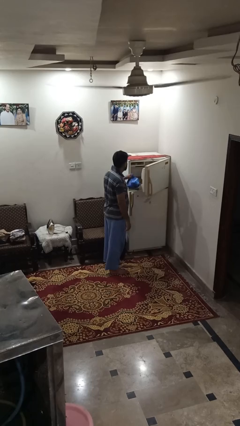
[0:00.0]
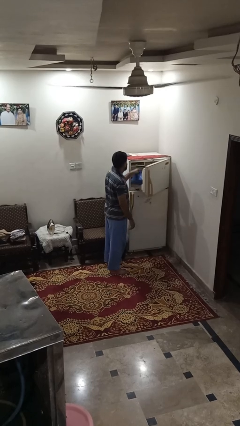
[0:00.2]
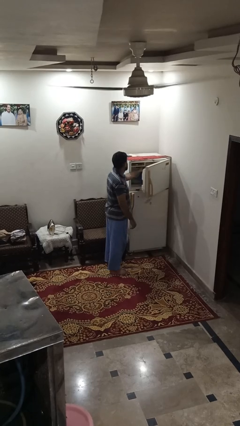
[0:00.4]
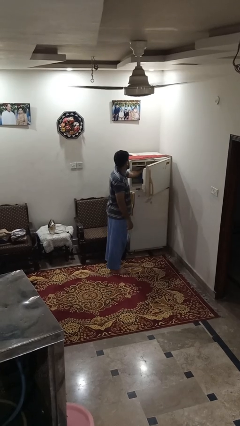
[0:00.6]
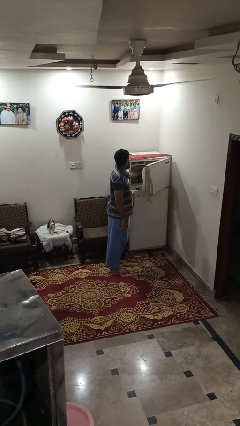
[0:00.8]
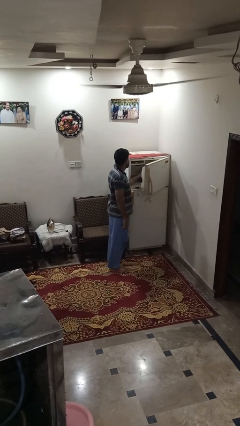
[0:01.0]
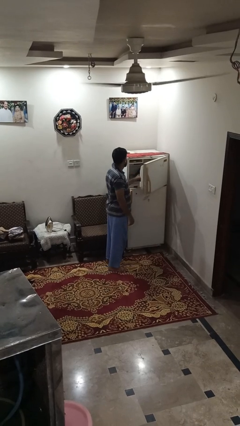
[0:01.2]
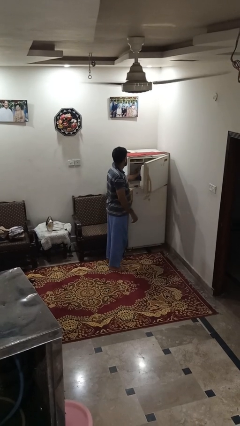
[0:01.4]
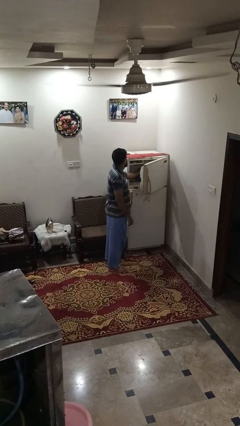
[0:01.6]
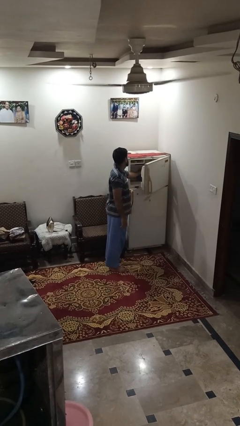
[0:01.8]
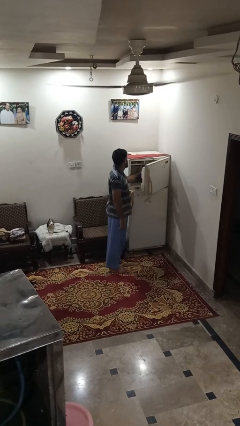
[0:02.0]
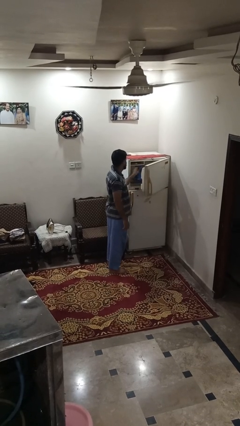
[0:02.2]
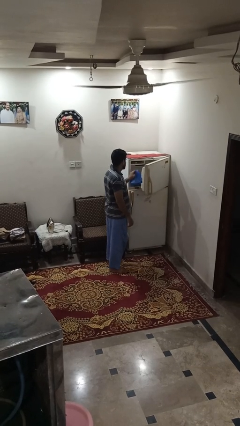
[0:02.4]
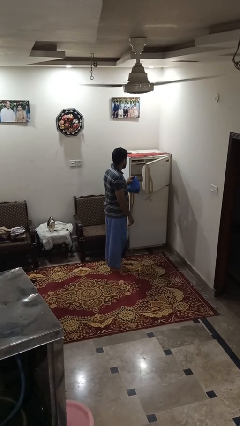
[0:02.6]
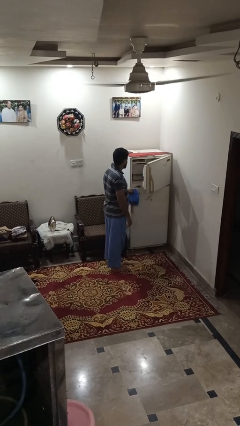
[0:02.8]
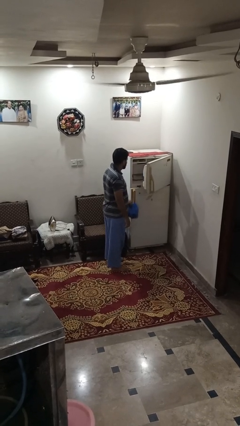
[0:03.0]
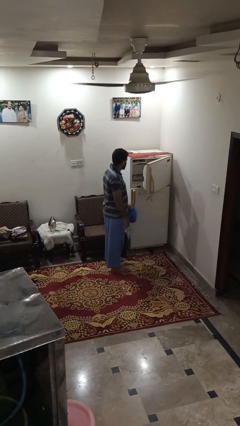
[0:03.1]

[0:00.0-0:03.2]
person loads groceries into refrigerator

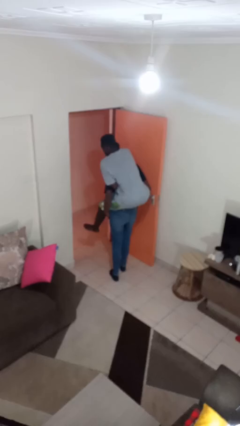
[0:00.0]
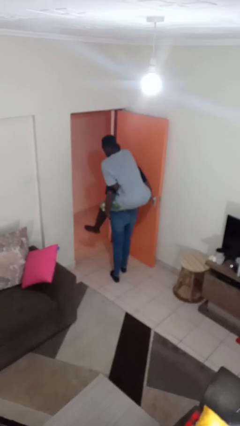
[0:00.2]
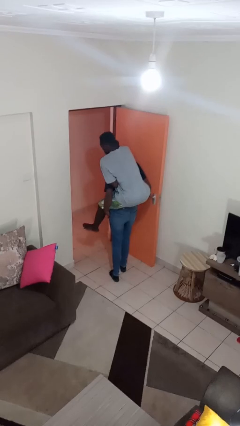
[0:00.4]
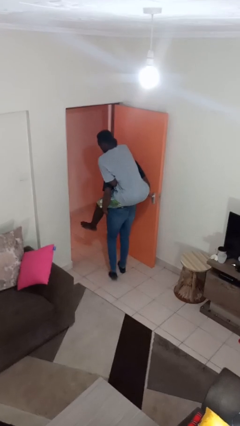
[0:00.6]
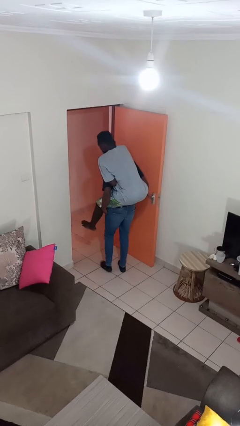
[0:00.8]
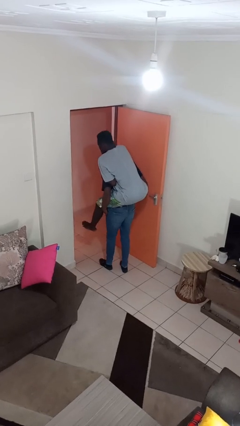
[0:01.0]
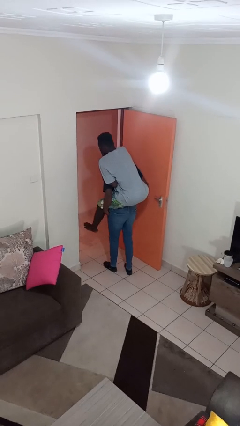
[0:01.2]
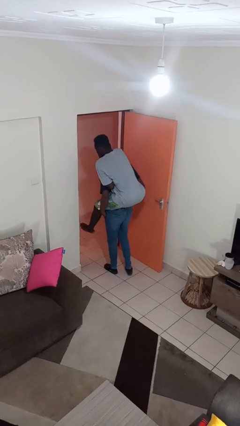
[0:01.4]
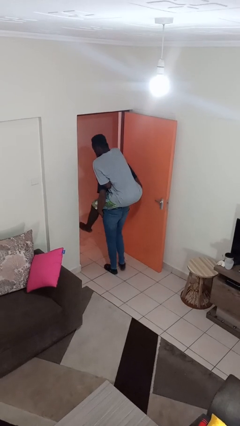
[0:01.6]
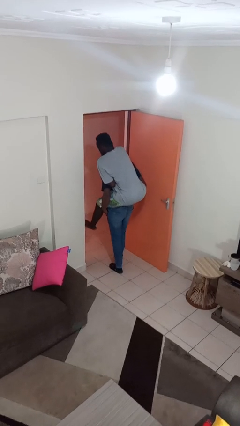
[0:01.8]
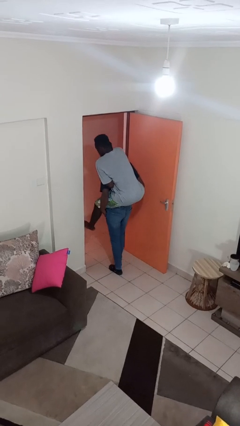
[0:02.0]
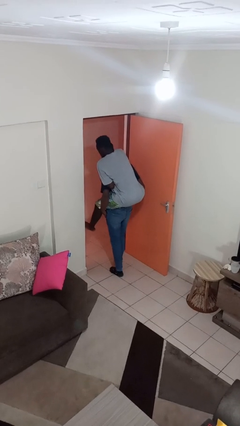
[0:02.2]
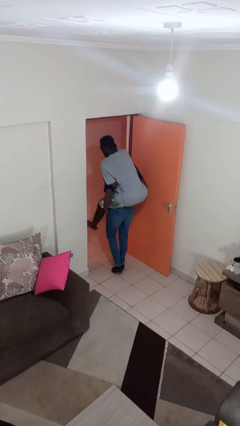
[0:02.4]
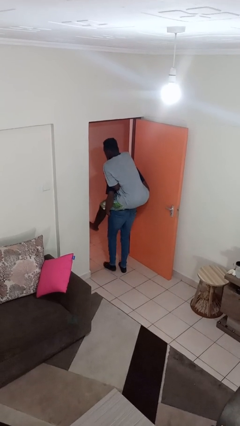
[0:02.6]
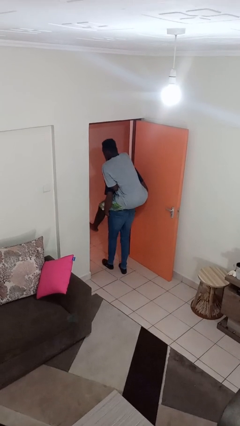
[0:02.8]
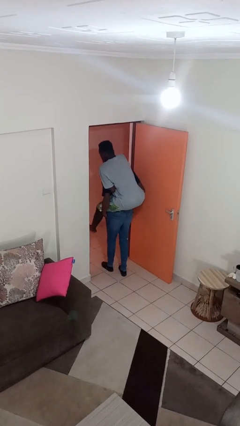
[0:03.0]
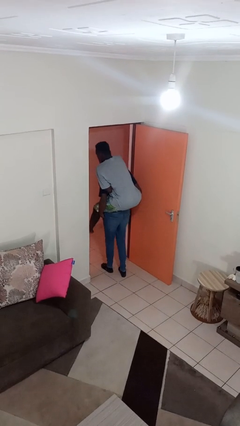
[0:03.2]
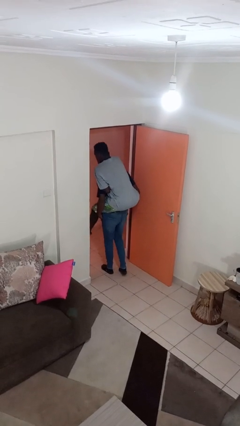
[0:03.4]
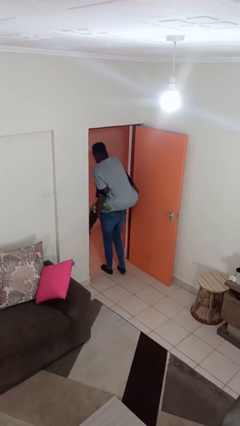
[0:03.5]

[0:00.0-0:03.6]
person carries person on back

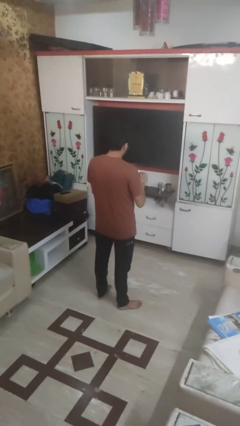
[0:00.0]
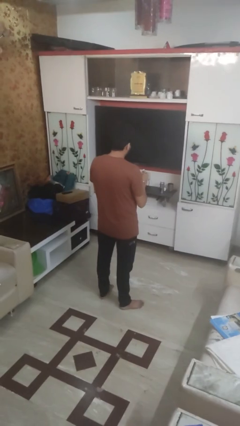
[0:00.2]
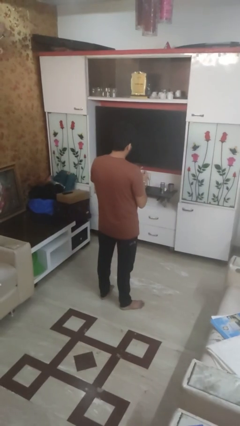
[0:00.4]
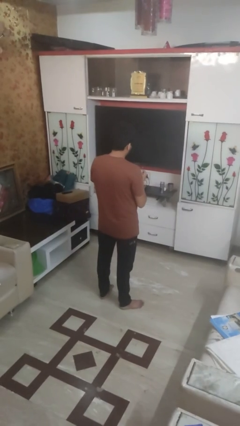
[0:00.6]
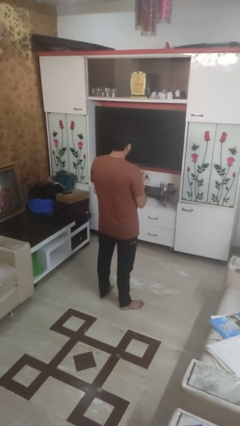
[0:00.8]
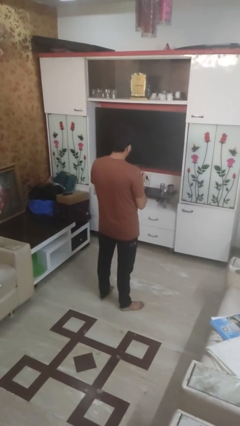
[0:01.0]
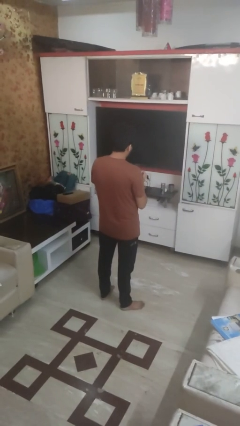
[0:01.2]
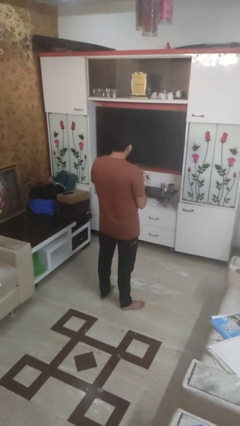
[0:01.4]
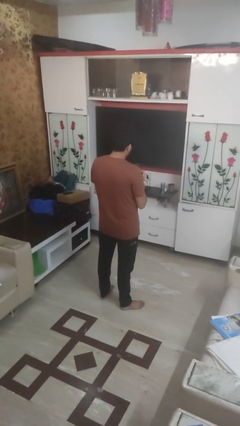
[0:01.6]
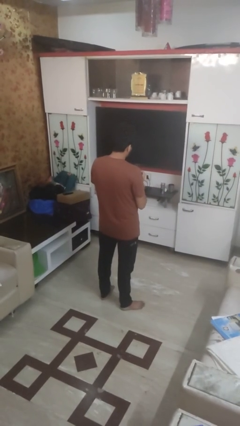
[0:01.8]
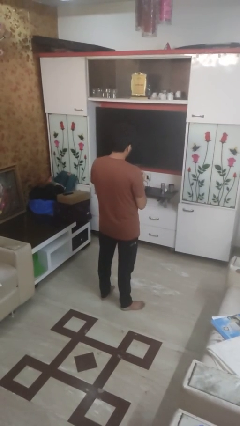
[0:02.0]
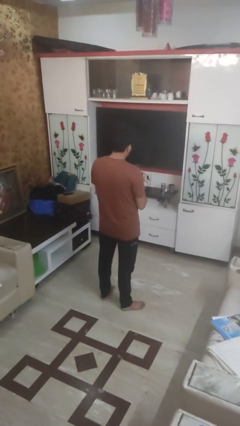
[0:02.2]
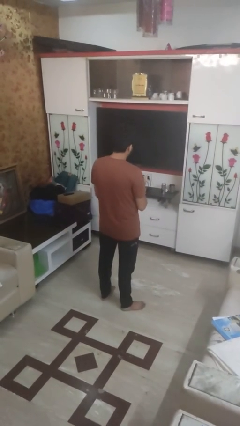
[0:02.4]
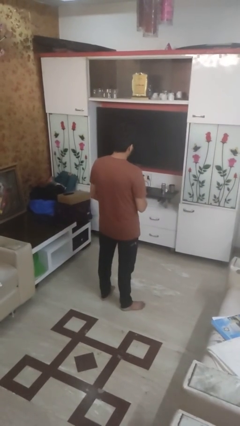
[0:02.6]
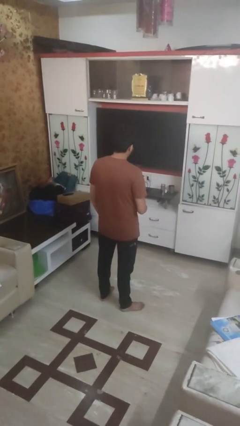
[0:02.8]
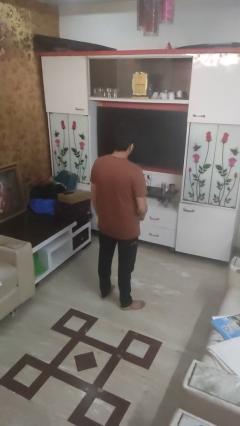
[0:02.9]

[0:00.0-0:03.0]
person files fingernails

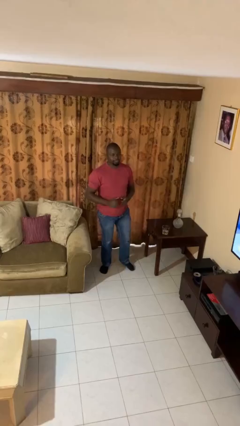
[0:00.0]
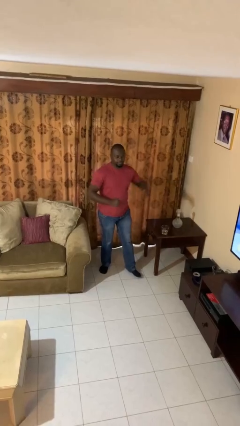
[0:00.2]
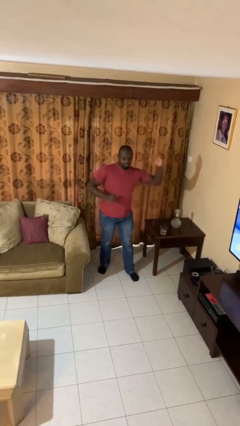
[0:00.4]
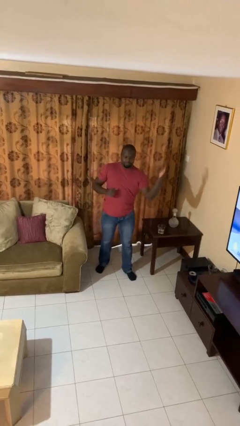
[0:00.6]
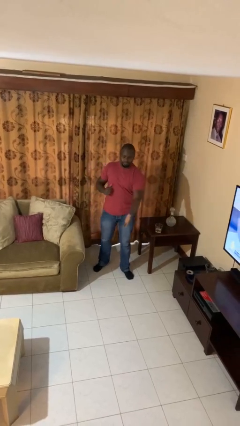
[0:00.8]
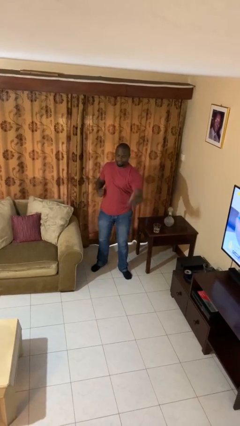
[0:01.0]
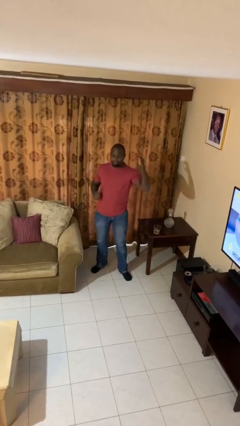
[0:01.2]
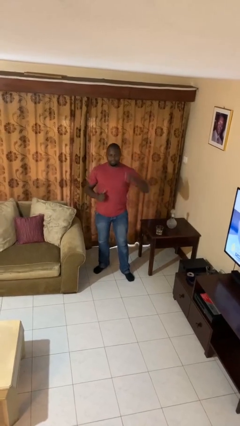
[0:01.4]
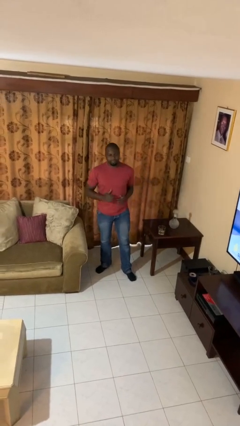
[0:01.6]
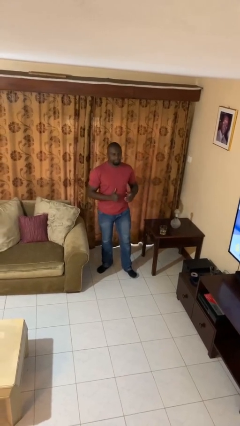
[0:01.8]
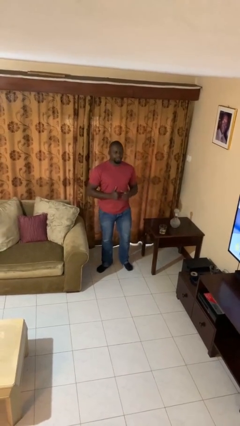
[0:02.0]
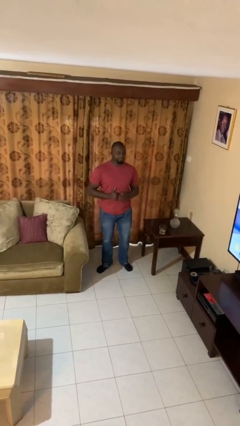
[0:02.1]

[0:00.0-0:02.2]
person karate chop

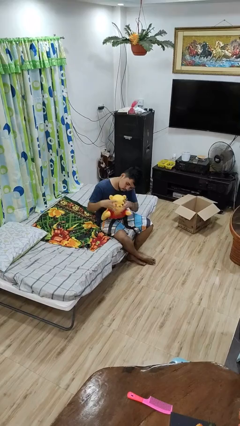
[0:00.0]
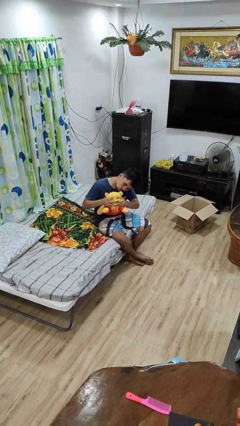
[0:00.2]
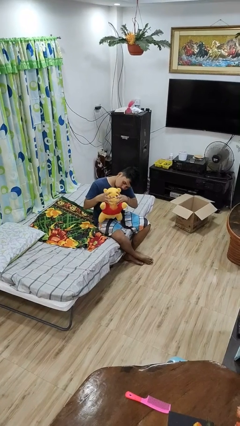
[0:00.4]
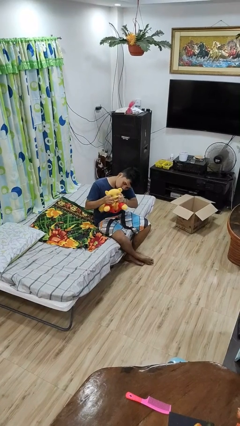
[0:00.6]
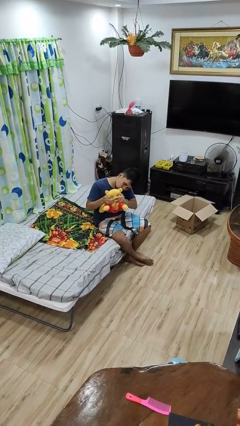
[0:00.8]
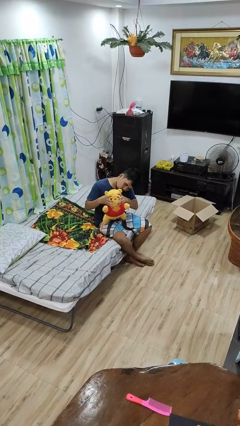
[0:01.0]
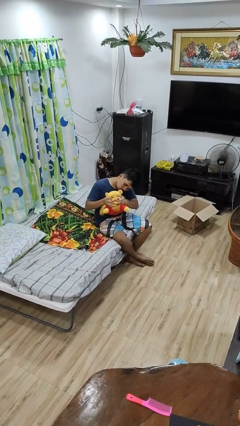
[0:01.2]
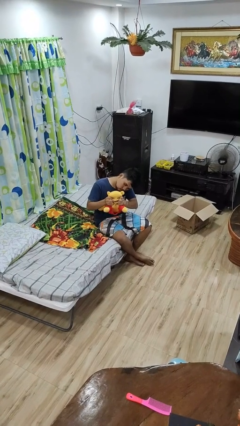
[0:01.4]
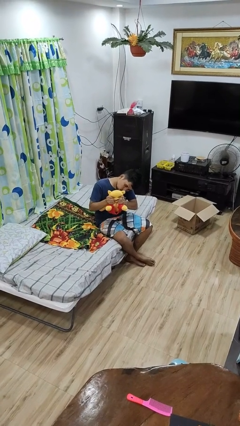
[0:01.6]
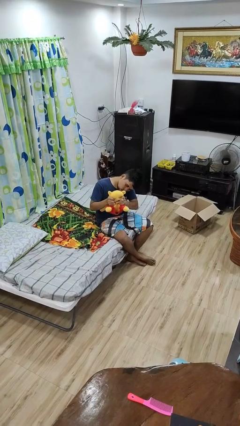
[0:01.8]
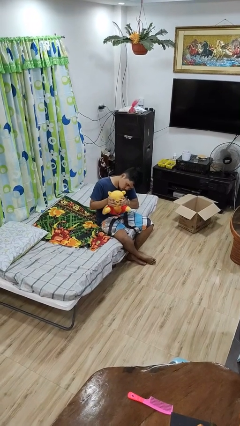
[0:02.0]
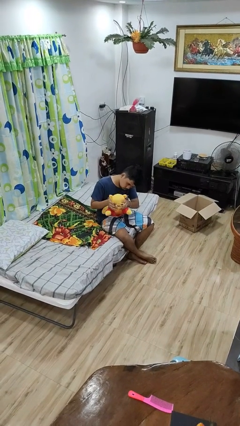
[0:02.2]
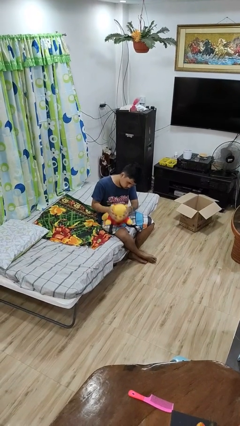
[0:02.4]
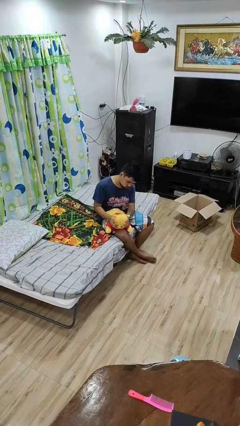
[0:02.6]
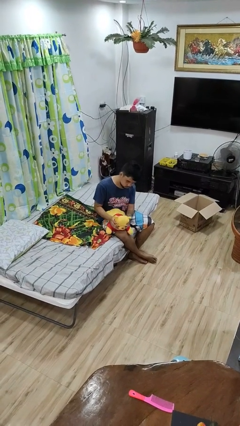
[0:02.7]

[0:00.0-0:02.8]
person squeezes object

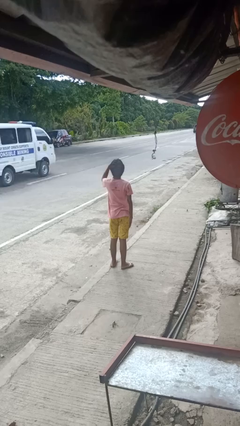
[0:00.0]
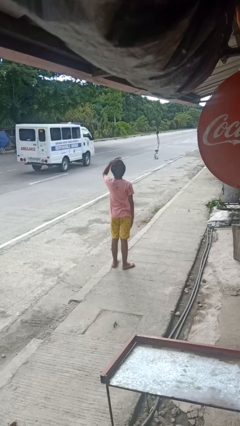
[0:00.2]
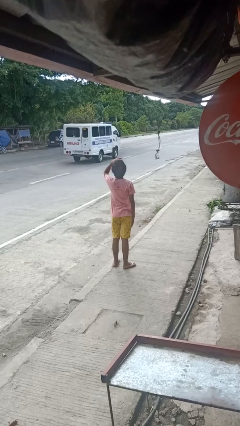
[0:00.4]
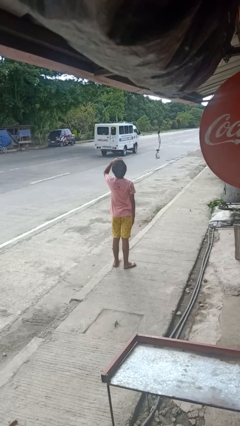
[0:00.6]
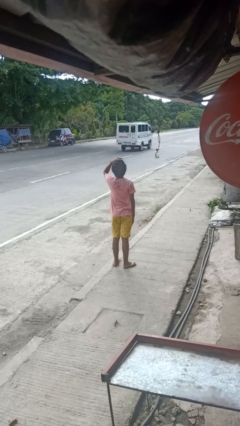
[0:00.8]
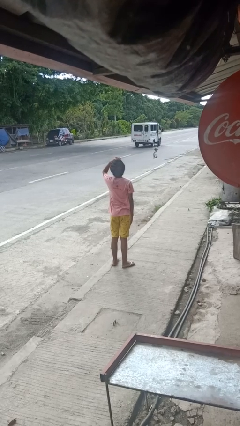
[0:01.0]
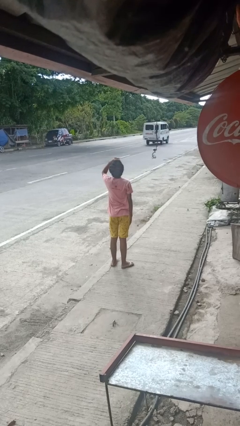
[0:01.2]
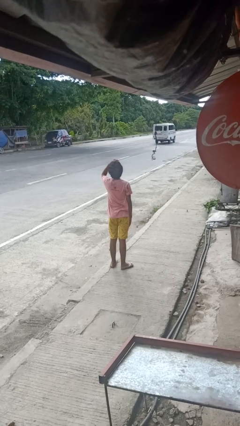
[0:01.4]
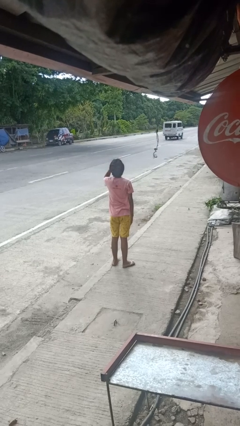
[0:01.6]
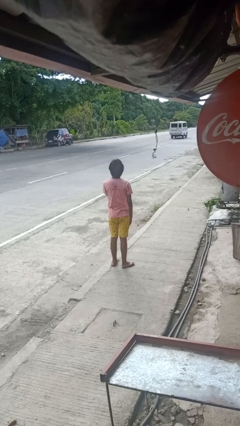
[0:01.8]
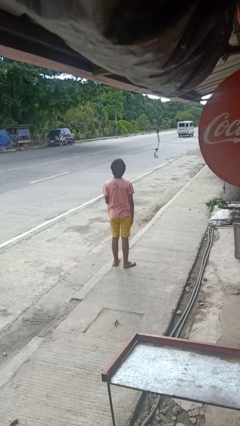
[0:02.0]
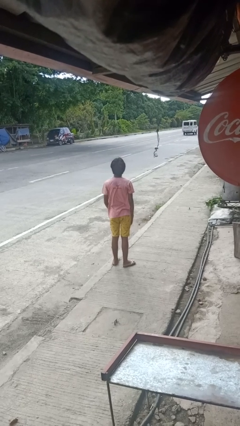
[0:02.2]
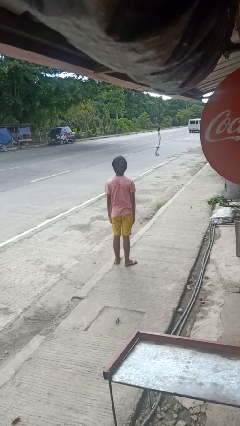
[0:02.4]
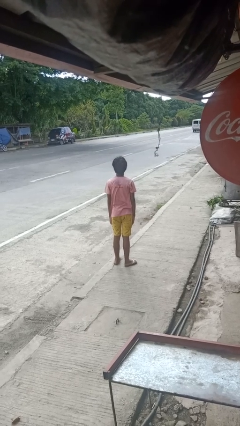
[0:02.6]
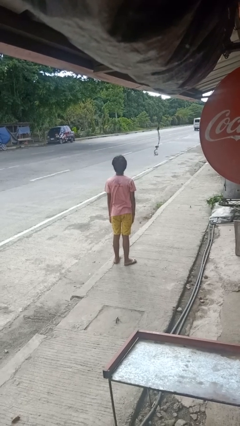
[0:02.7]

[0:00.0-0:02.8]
person shades eyes
